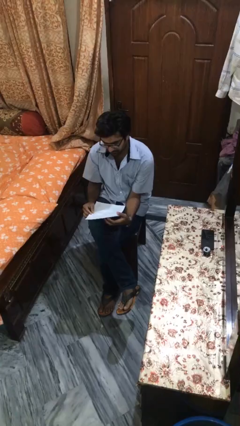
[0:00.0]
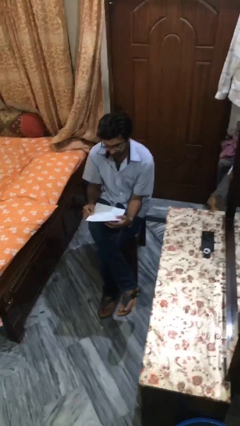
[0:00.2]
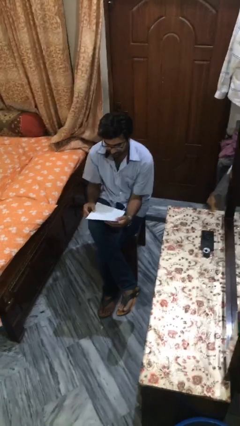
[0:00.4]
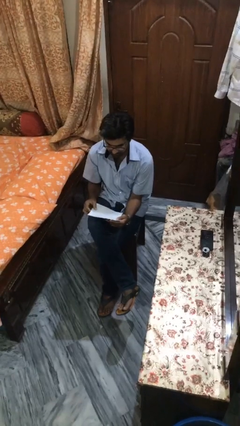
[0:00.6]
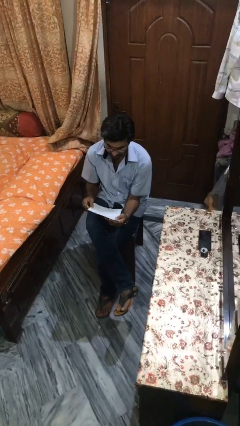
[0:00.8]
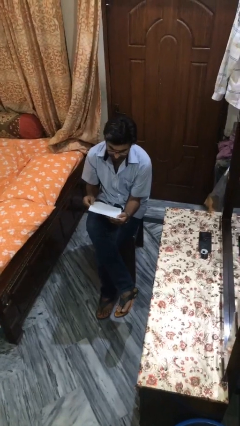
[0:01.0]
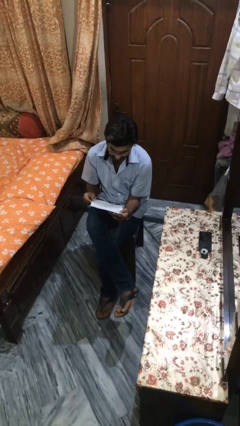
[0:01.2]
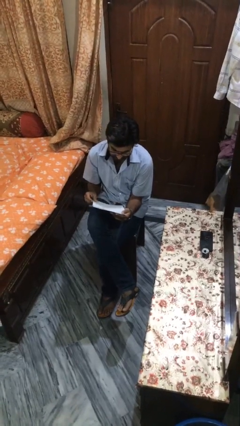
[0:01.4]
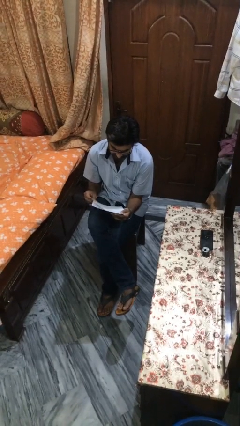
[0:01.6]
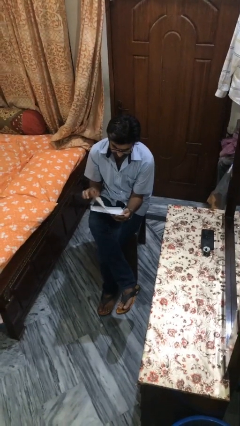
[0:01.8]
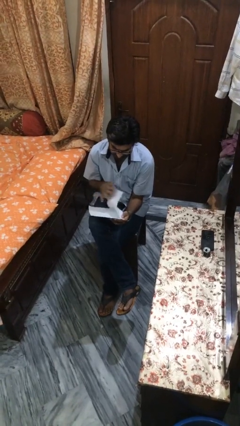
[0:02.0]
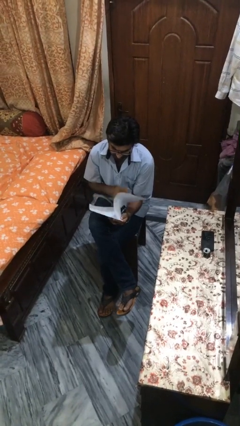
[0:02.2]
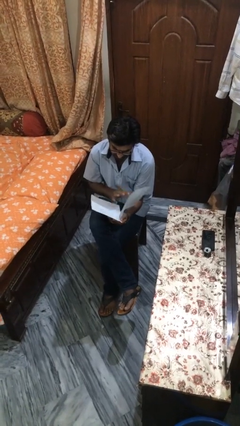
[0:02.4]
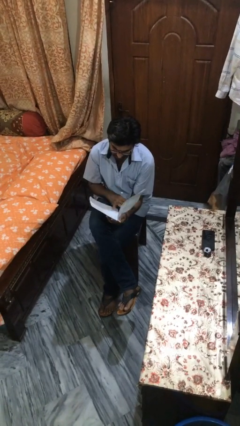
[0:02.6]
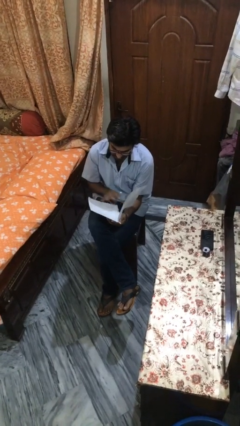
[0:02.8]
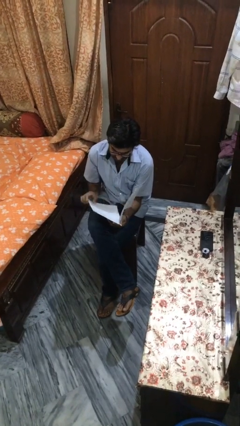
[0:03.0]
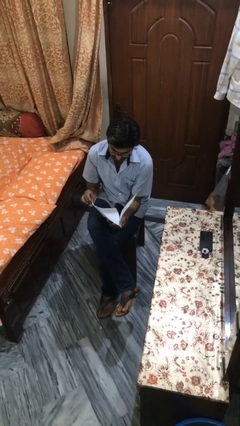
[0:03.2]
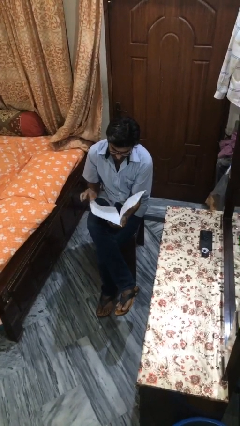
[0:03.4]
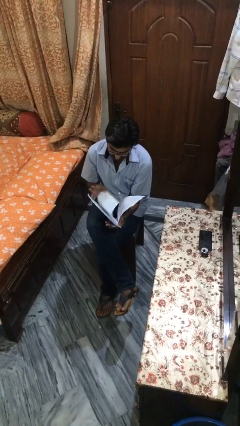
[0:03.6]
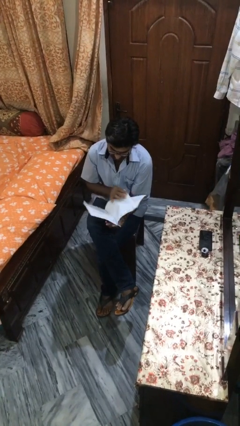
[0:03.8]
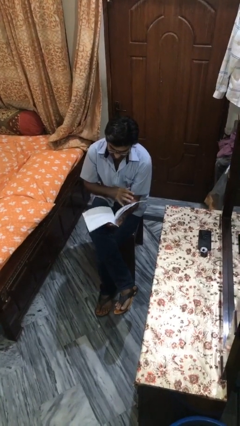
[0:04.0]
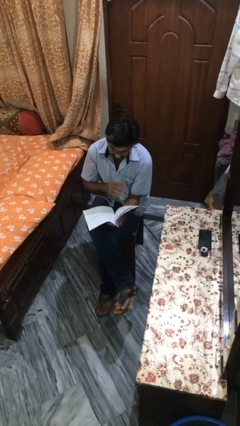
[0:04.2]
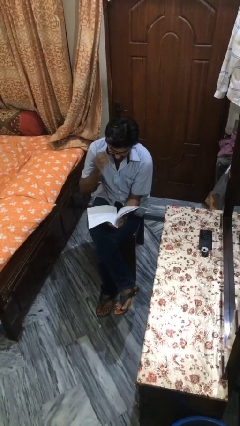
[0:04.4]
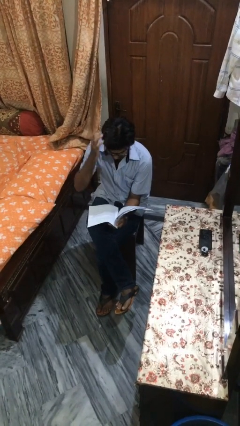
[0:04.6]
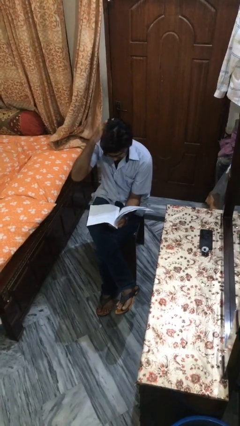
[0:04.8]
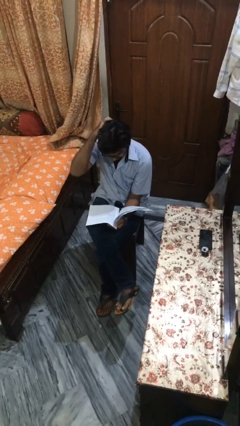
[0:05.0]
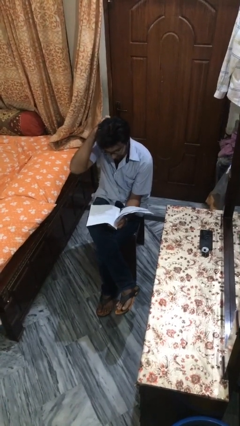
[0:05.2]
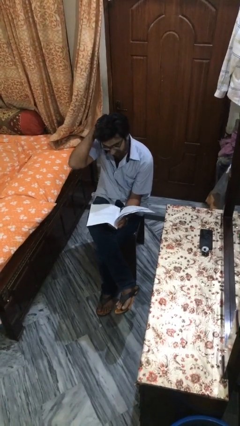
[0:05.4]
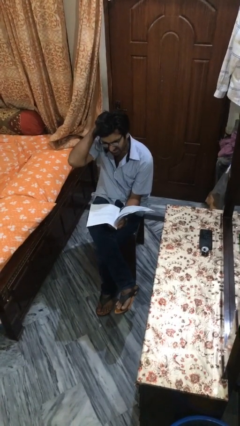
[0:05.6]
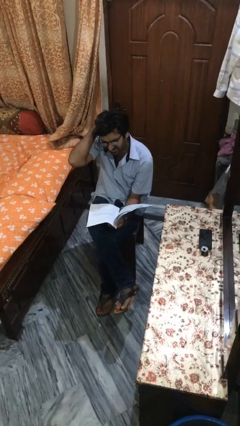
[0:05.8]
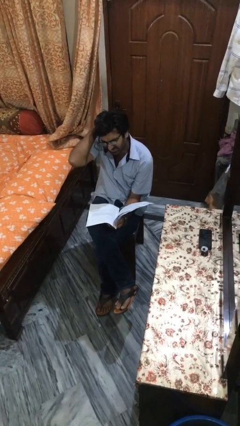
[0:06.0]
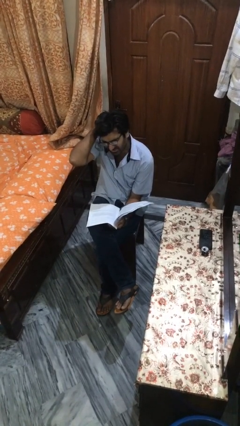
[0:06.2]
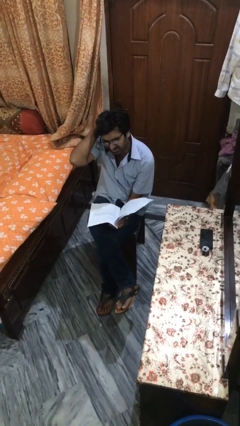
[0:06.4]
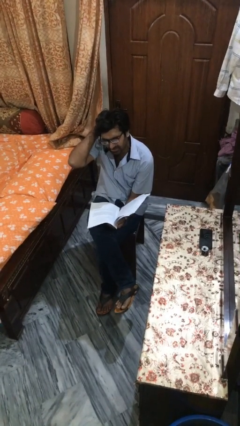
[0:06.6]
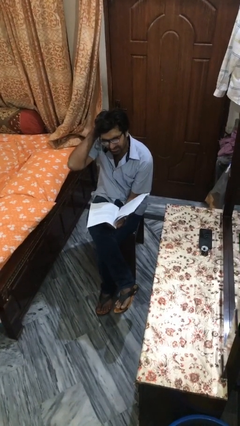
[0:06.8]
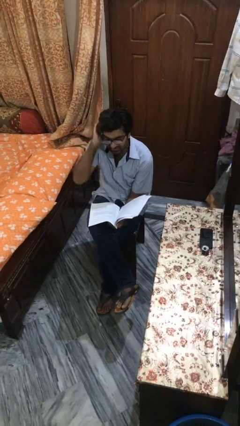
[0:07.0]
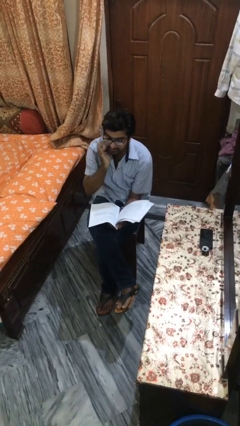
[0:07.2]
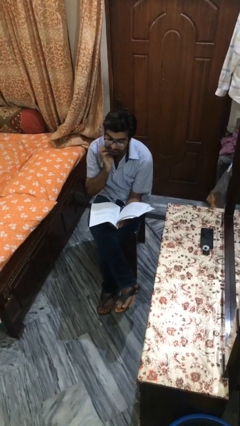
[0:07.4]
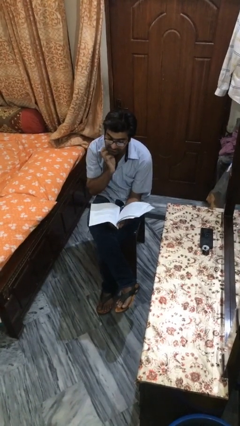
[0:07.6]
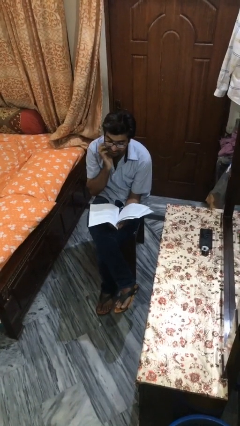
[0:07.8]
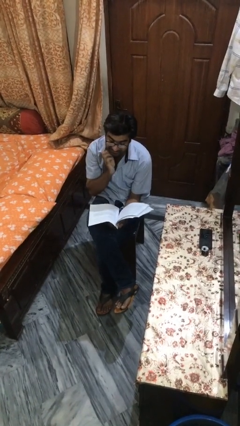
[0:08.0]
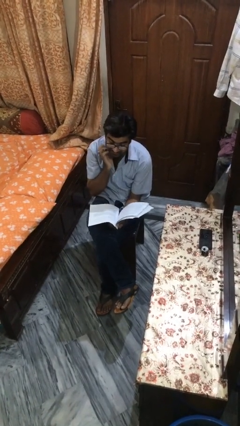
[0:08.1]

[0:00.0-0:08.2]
person reads document

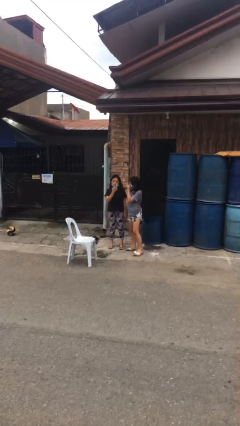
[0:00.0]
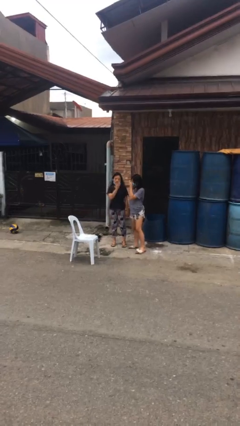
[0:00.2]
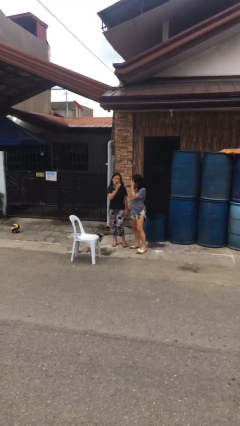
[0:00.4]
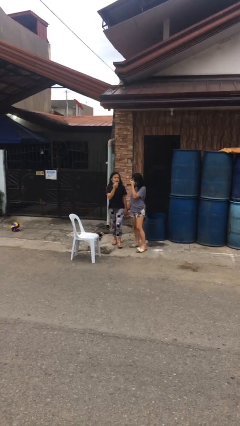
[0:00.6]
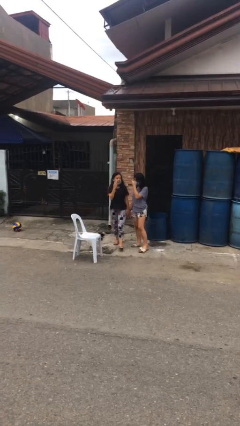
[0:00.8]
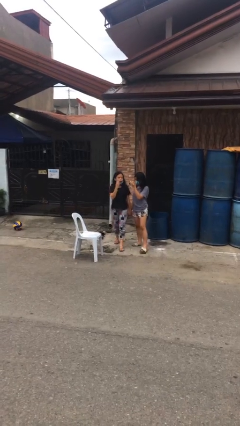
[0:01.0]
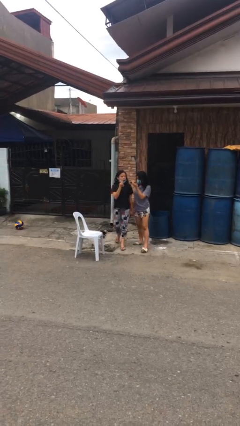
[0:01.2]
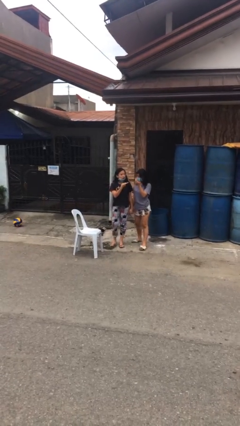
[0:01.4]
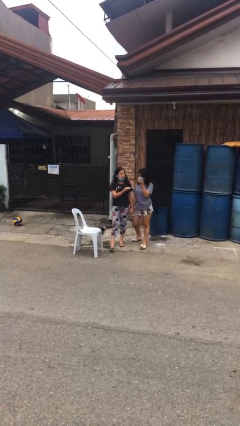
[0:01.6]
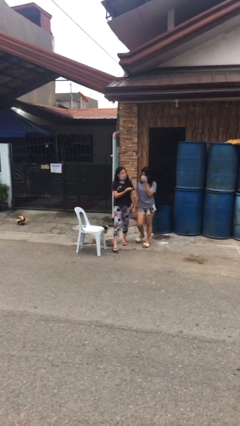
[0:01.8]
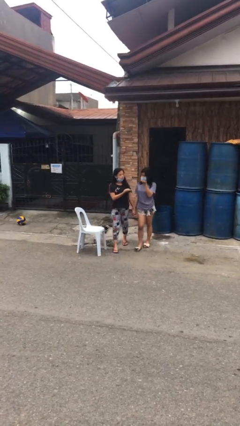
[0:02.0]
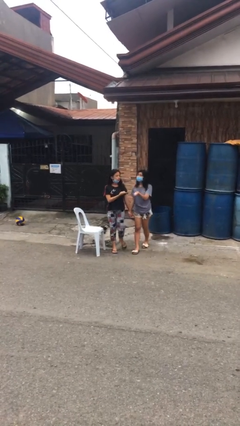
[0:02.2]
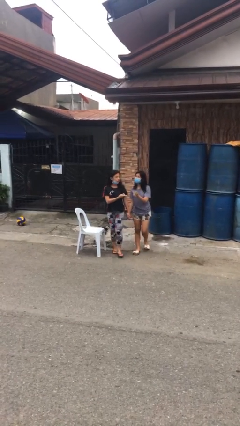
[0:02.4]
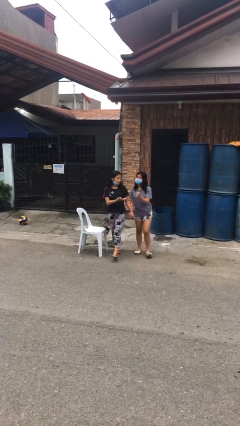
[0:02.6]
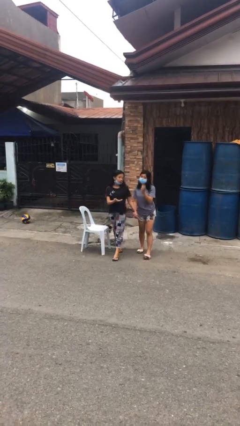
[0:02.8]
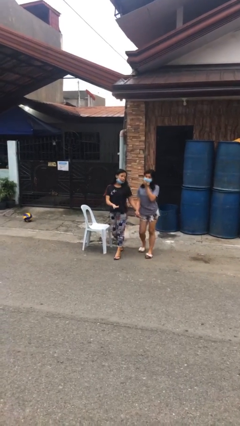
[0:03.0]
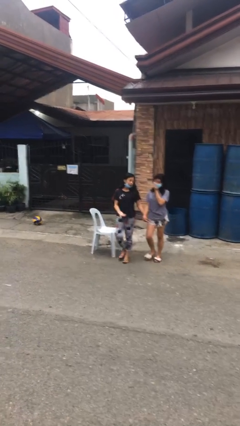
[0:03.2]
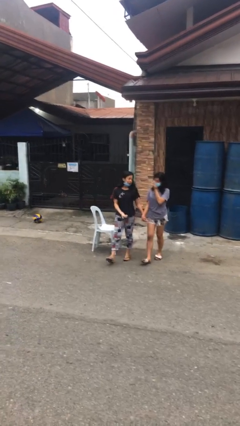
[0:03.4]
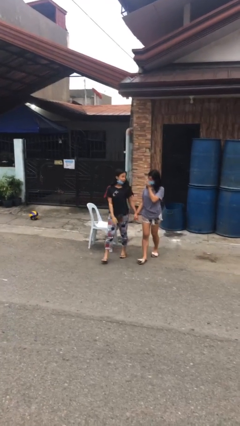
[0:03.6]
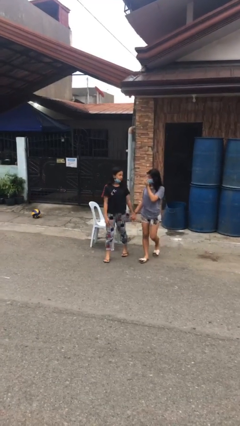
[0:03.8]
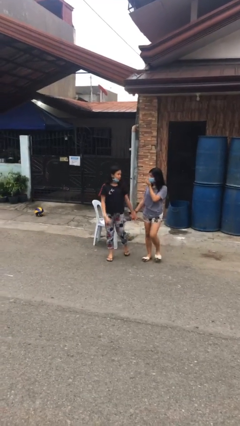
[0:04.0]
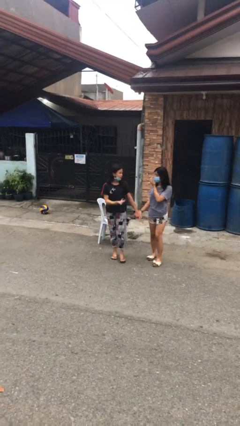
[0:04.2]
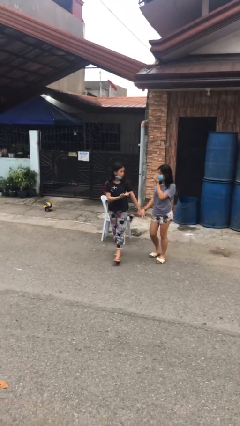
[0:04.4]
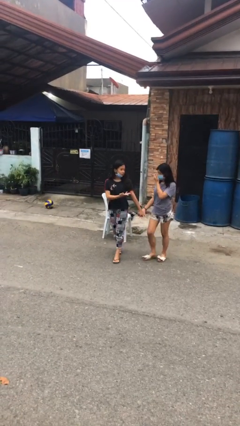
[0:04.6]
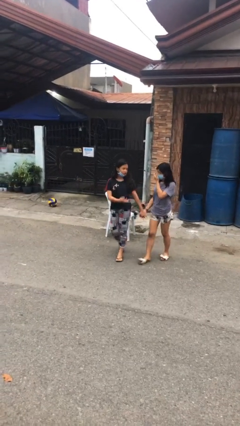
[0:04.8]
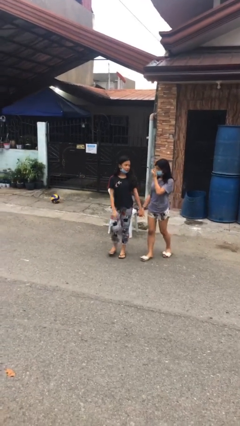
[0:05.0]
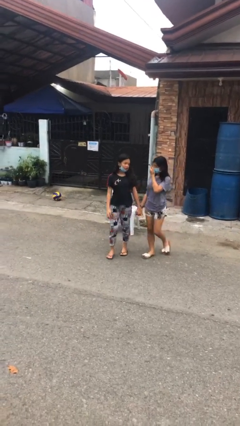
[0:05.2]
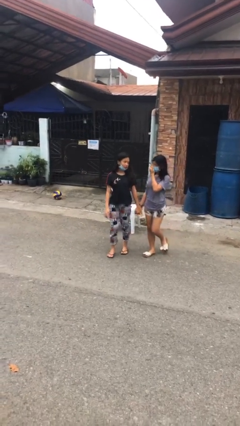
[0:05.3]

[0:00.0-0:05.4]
person holds hand

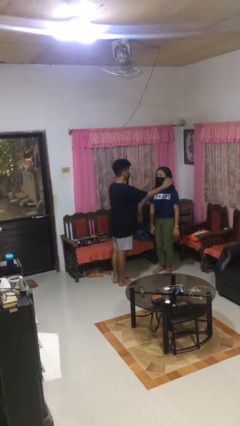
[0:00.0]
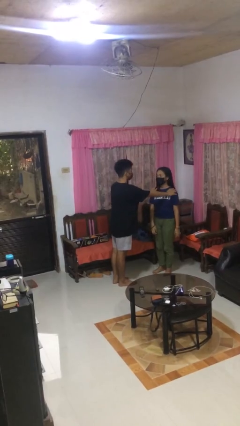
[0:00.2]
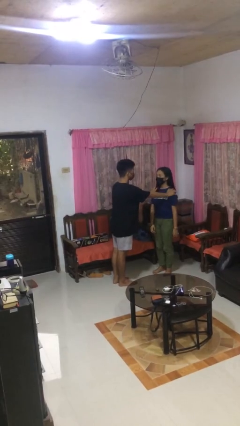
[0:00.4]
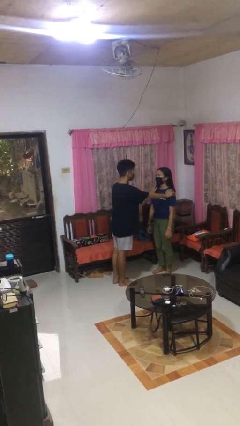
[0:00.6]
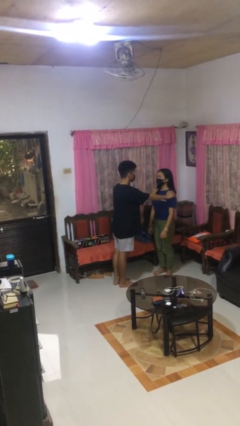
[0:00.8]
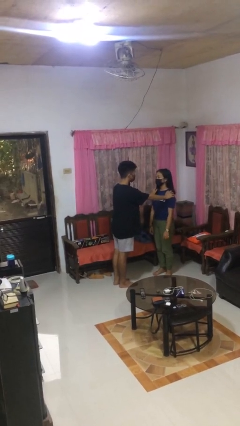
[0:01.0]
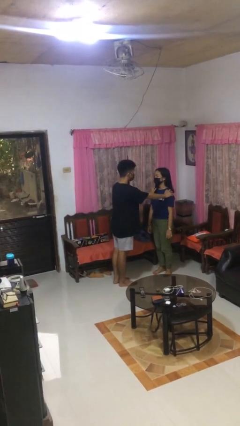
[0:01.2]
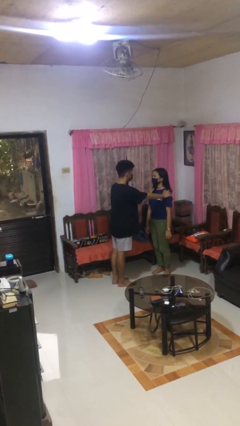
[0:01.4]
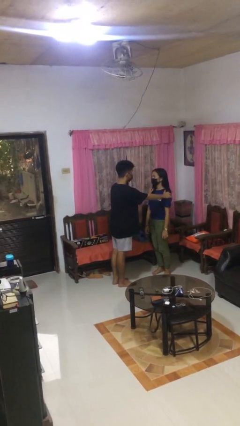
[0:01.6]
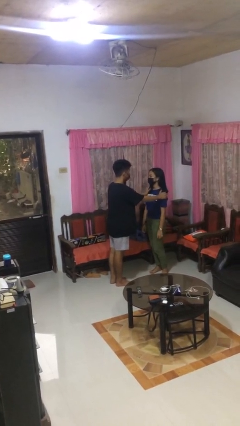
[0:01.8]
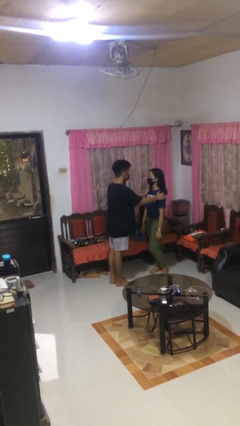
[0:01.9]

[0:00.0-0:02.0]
person grabs person by shoulder

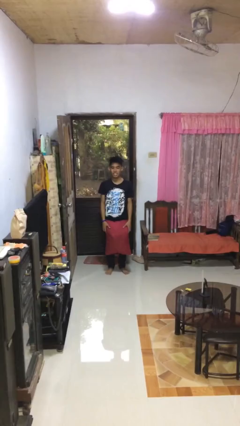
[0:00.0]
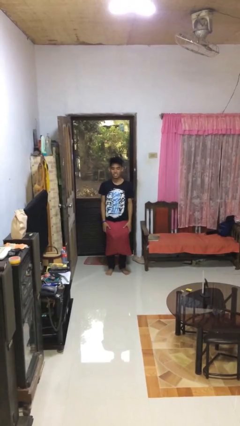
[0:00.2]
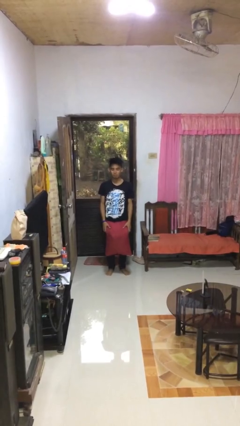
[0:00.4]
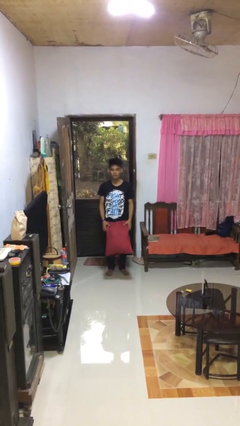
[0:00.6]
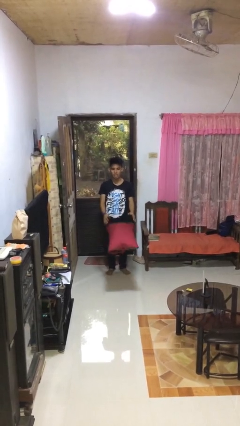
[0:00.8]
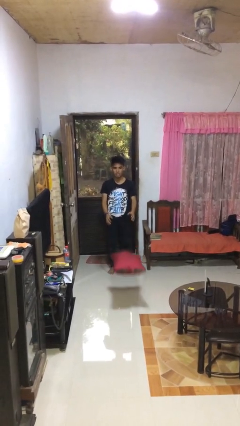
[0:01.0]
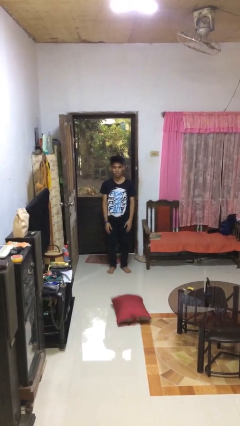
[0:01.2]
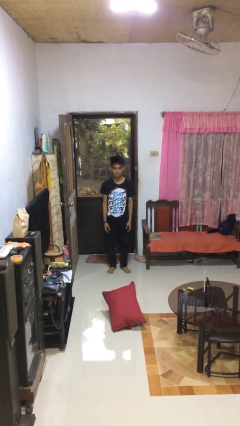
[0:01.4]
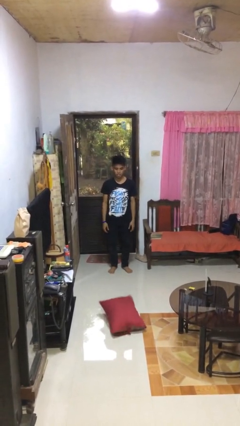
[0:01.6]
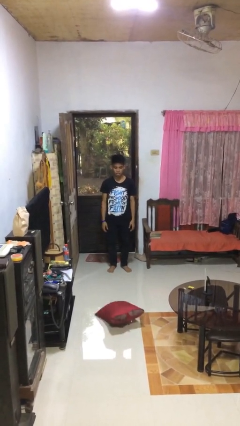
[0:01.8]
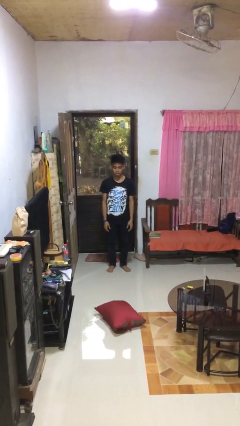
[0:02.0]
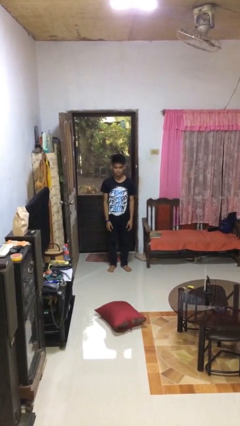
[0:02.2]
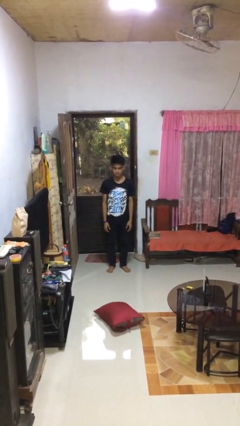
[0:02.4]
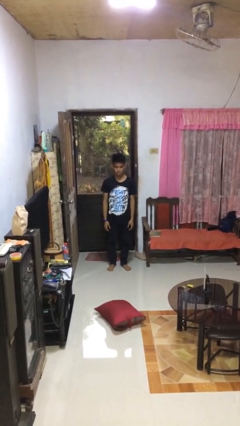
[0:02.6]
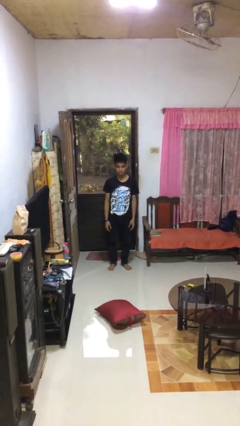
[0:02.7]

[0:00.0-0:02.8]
person throws object to ground
